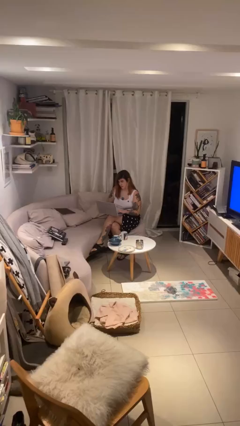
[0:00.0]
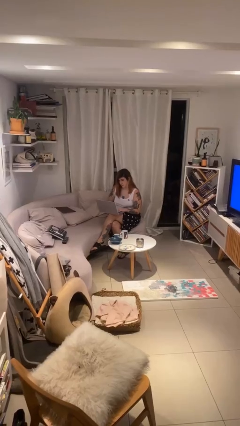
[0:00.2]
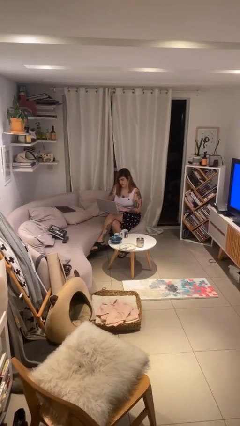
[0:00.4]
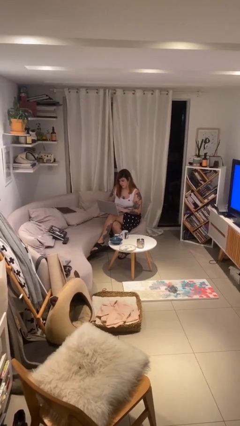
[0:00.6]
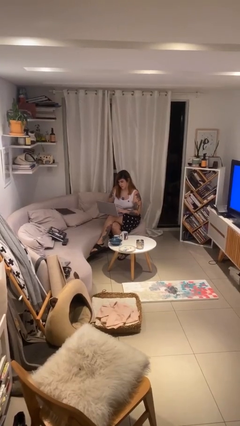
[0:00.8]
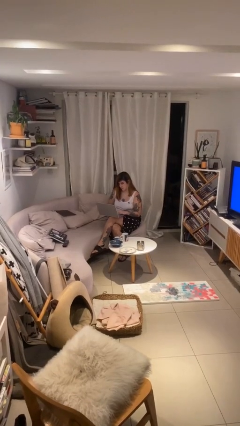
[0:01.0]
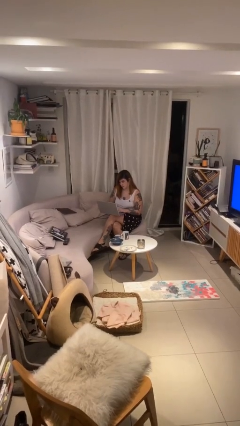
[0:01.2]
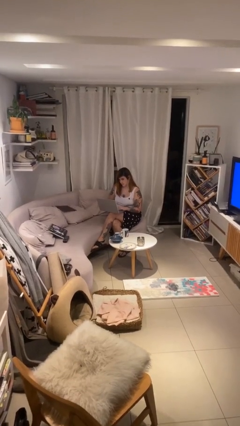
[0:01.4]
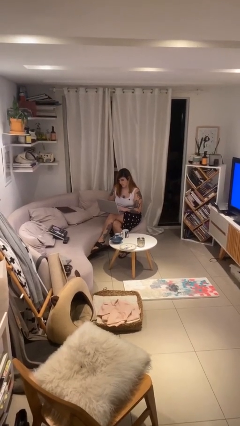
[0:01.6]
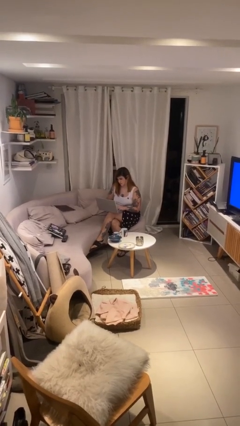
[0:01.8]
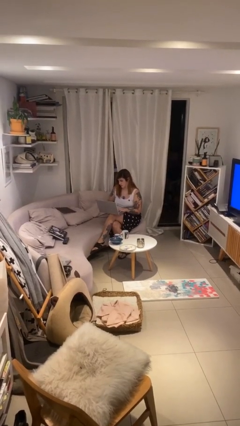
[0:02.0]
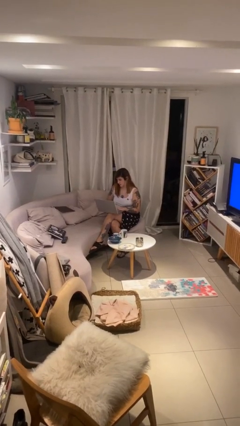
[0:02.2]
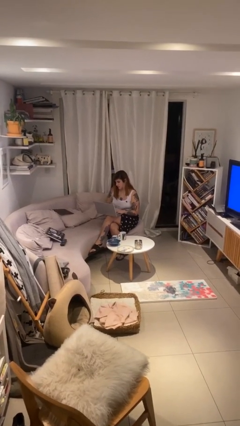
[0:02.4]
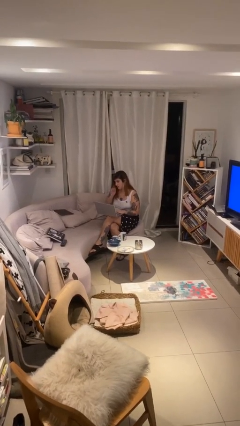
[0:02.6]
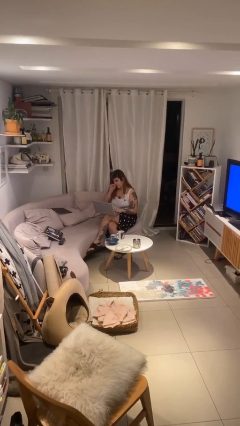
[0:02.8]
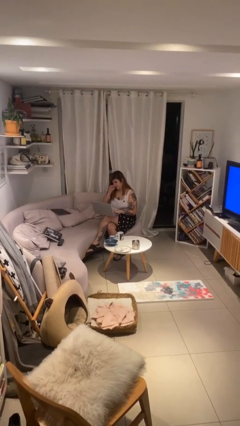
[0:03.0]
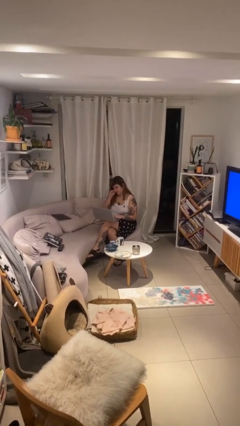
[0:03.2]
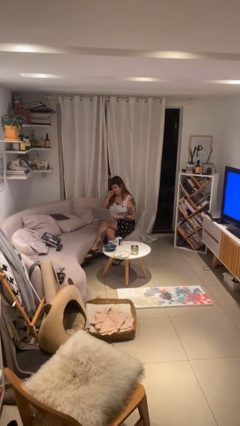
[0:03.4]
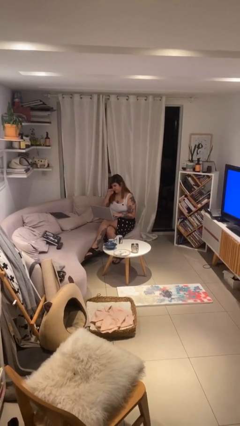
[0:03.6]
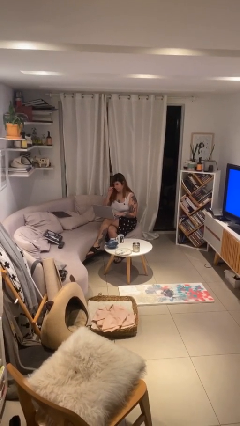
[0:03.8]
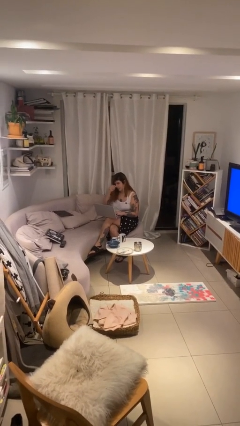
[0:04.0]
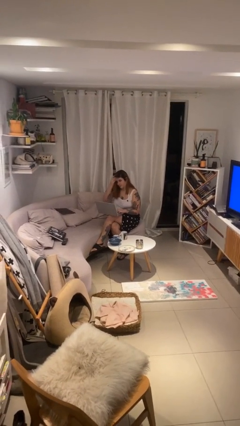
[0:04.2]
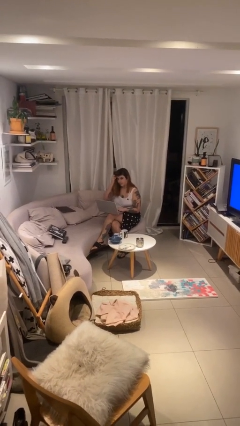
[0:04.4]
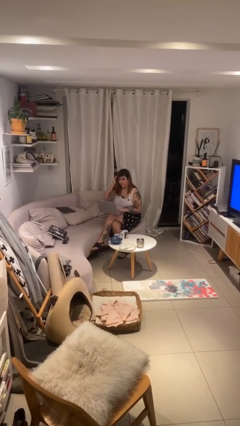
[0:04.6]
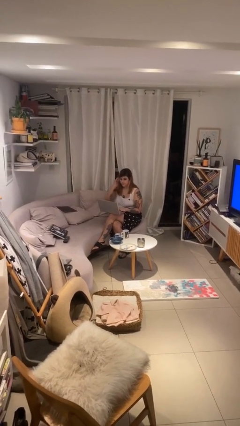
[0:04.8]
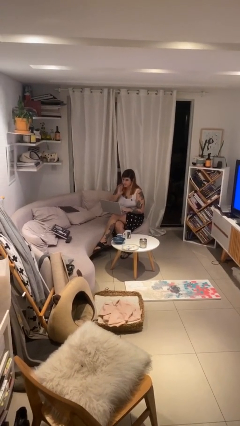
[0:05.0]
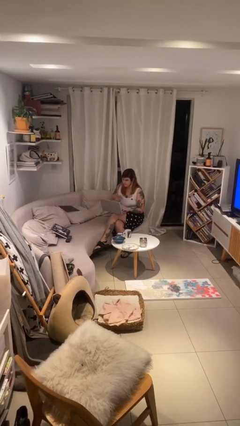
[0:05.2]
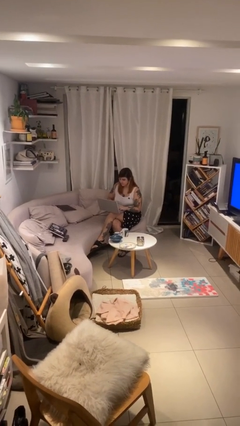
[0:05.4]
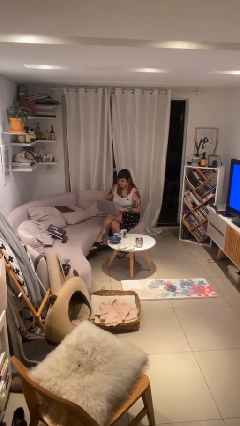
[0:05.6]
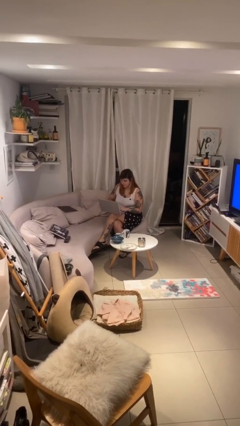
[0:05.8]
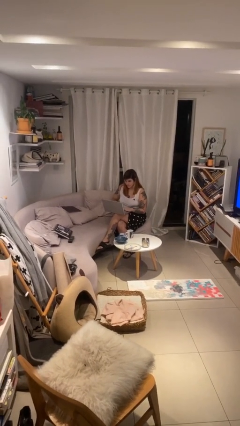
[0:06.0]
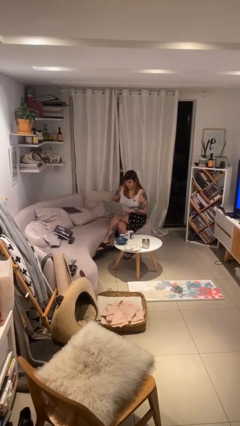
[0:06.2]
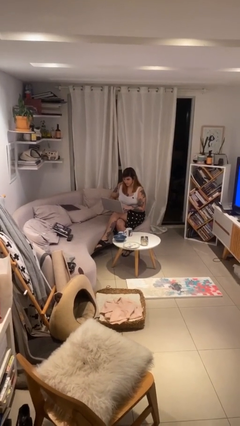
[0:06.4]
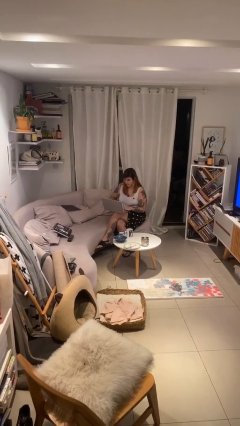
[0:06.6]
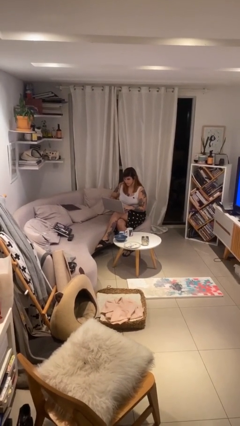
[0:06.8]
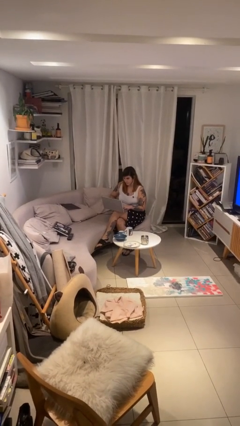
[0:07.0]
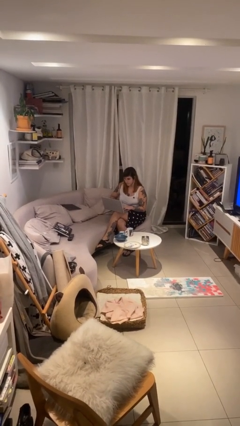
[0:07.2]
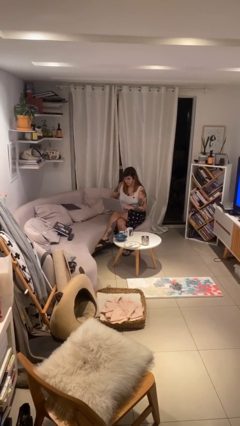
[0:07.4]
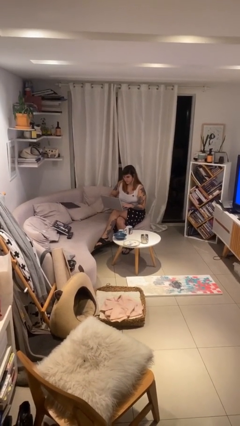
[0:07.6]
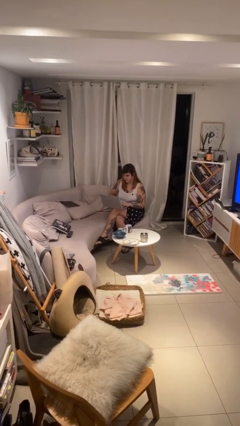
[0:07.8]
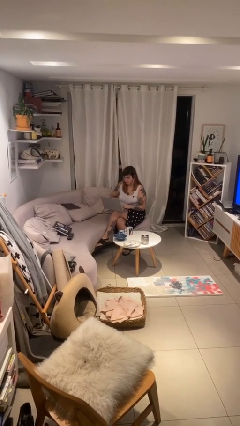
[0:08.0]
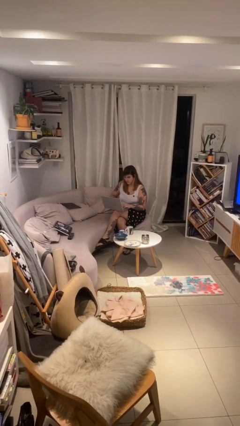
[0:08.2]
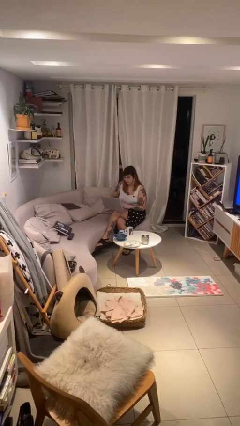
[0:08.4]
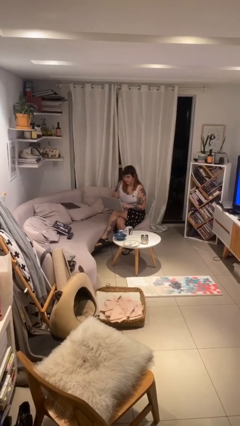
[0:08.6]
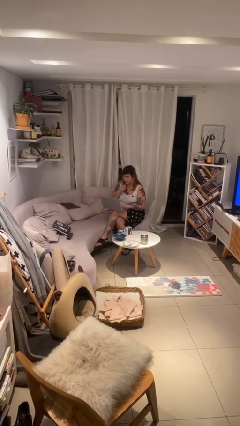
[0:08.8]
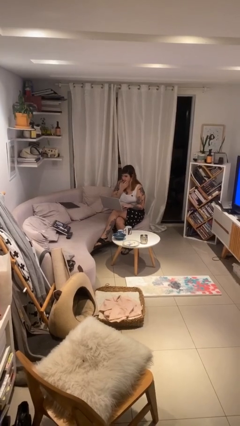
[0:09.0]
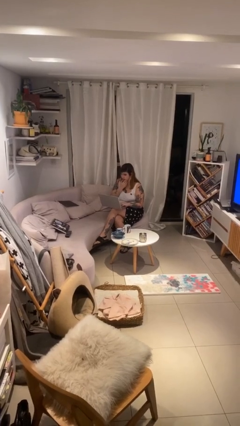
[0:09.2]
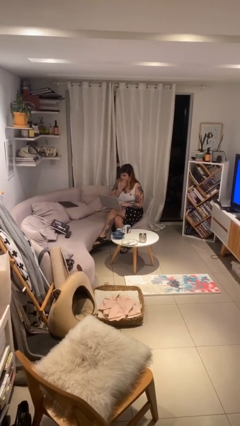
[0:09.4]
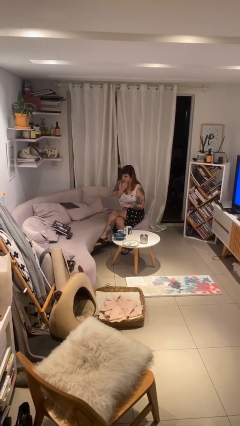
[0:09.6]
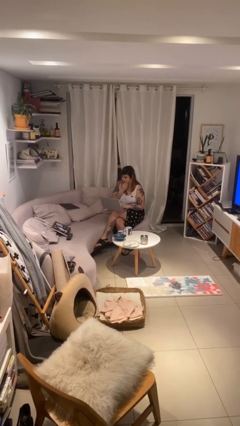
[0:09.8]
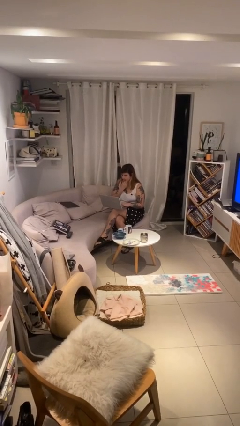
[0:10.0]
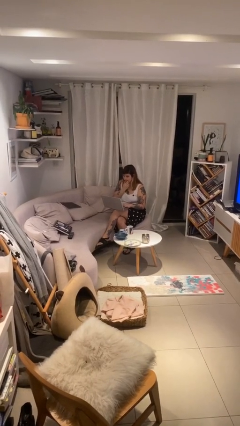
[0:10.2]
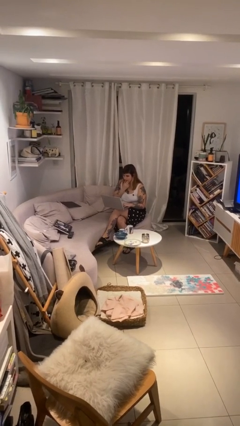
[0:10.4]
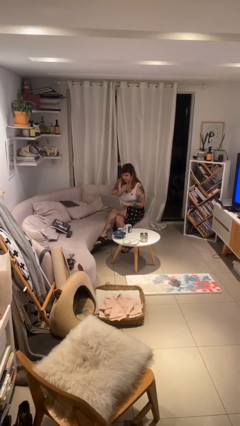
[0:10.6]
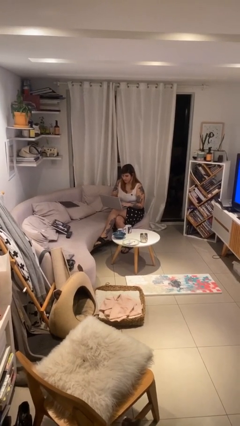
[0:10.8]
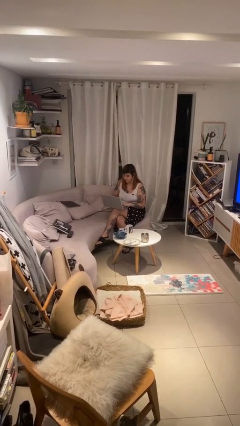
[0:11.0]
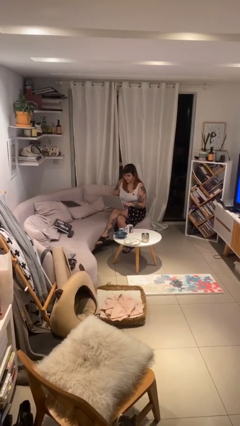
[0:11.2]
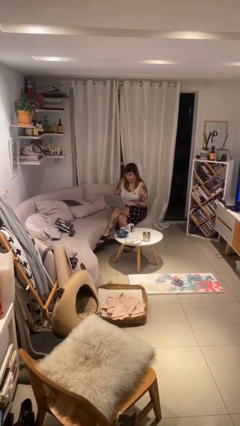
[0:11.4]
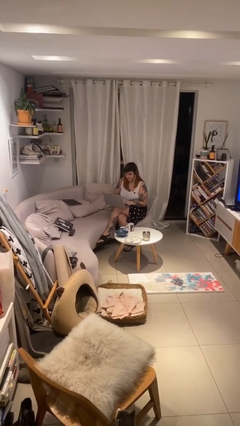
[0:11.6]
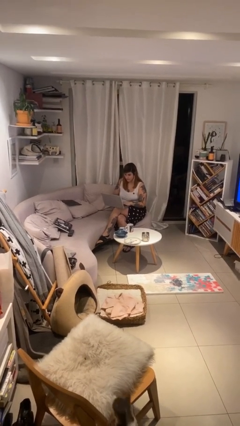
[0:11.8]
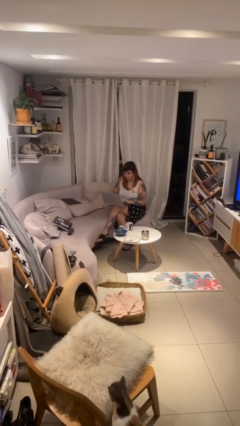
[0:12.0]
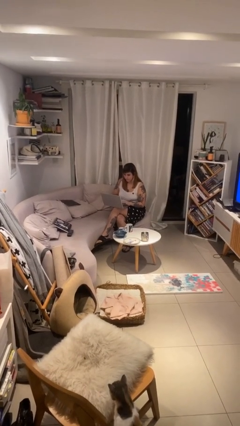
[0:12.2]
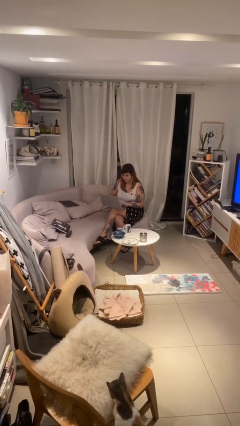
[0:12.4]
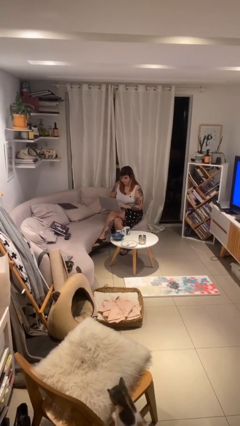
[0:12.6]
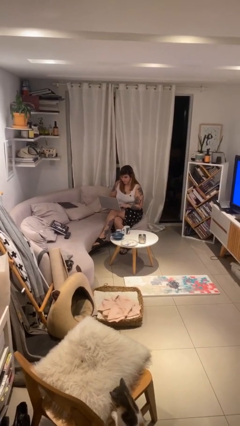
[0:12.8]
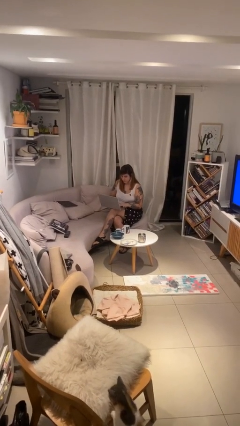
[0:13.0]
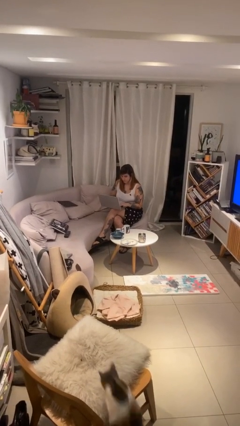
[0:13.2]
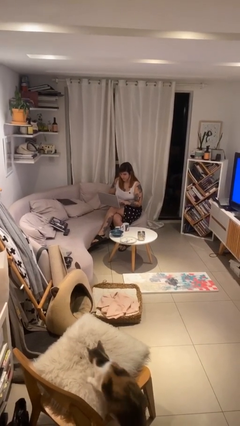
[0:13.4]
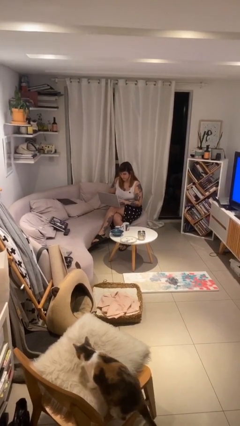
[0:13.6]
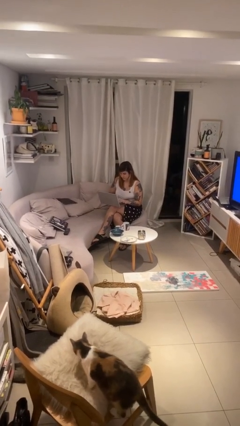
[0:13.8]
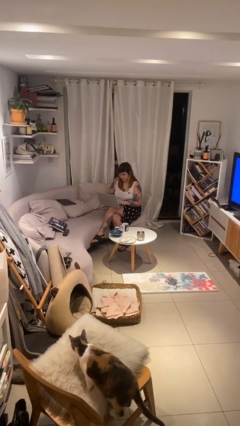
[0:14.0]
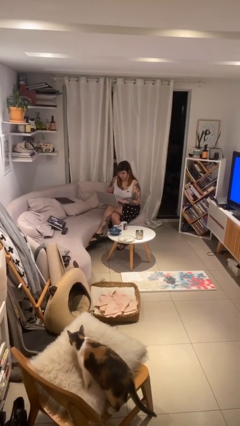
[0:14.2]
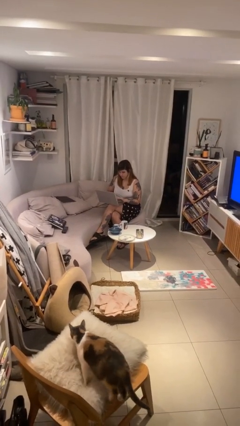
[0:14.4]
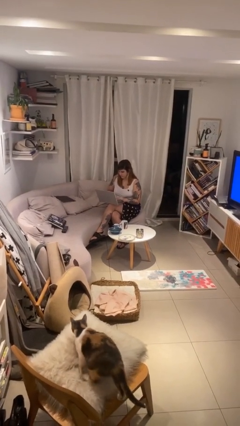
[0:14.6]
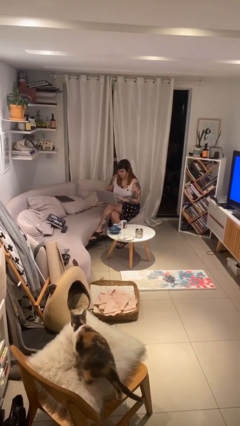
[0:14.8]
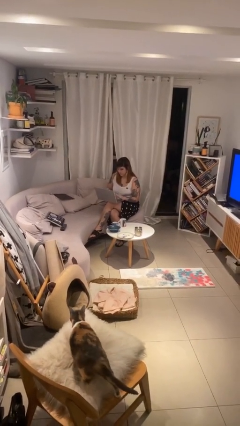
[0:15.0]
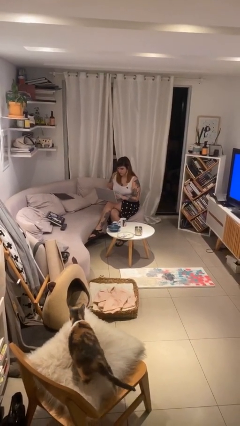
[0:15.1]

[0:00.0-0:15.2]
person interacts with laptop

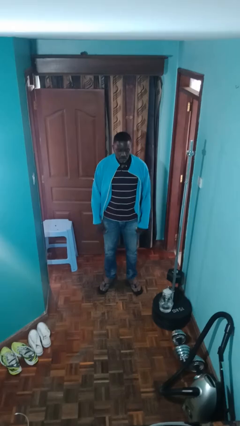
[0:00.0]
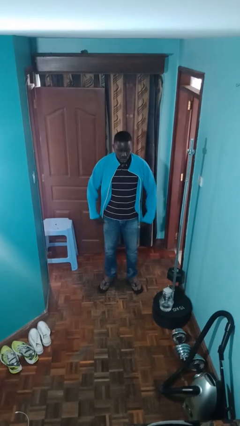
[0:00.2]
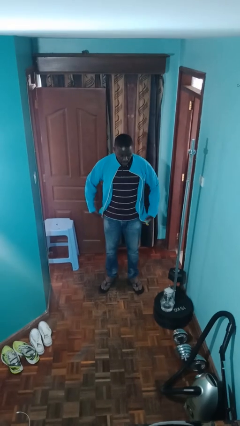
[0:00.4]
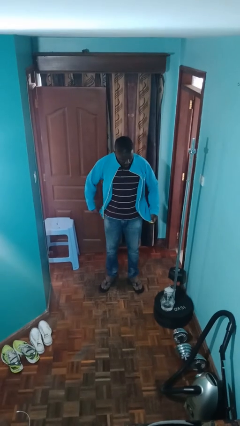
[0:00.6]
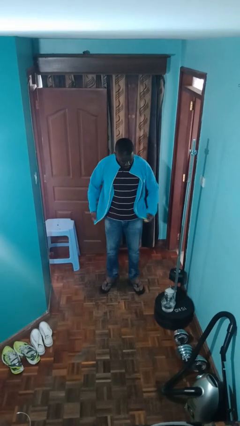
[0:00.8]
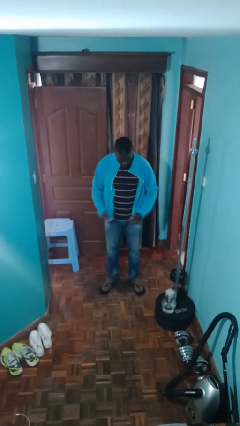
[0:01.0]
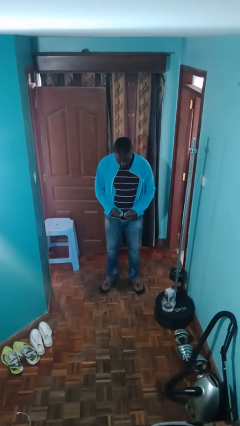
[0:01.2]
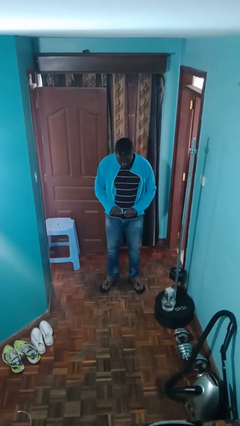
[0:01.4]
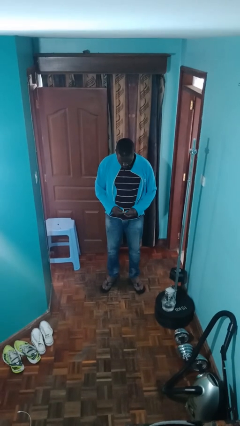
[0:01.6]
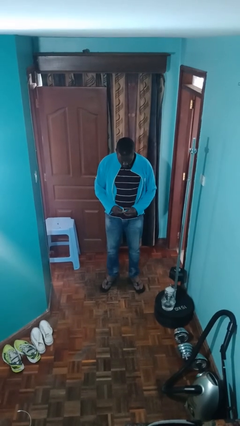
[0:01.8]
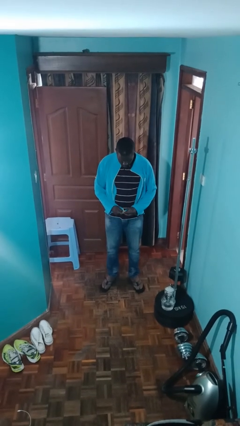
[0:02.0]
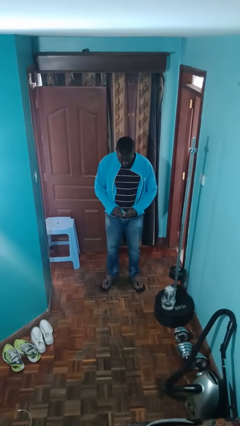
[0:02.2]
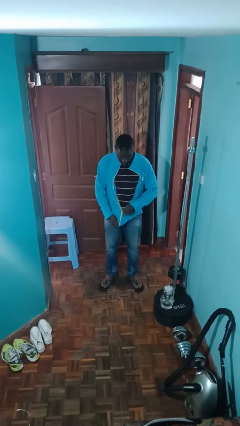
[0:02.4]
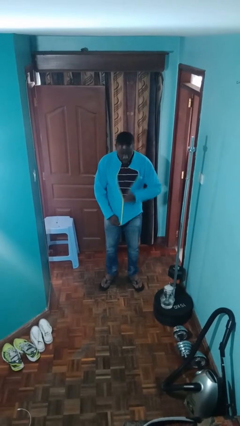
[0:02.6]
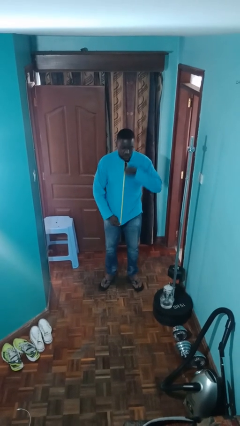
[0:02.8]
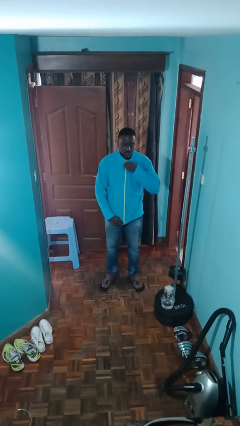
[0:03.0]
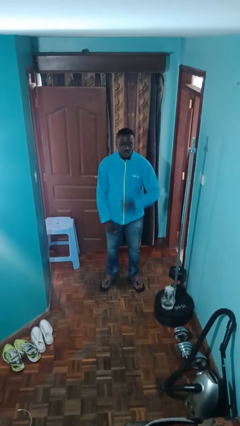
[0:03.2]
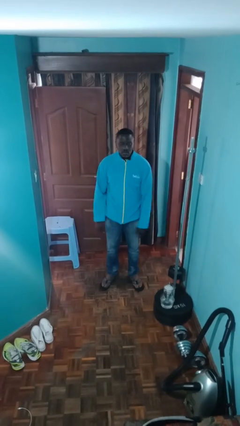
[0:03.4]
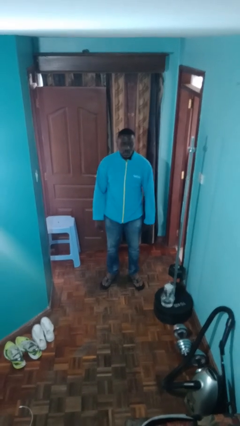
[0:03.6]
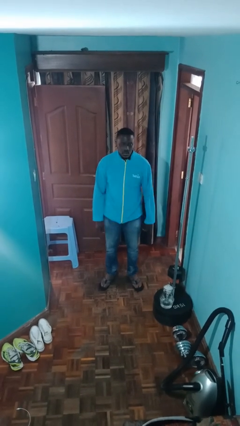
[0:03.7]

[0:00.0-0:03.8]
person zips up jacket
